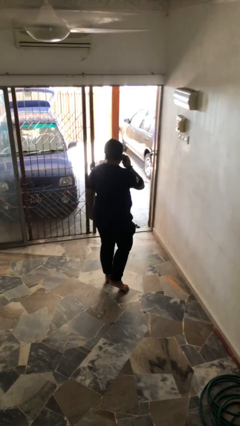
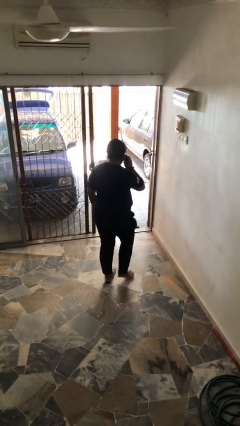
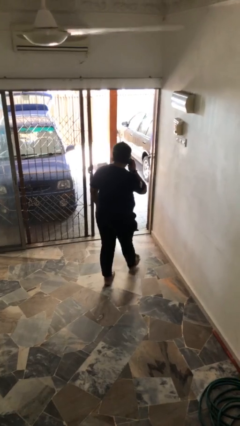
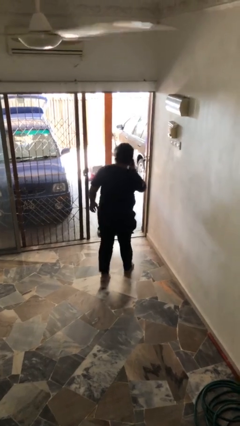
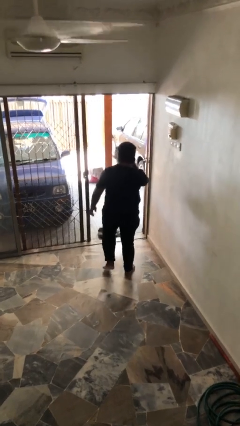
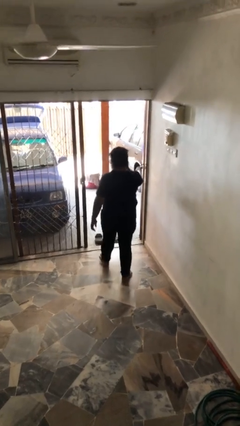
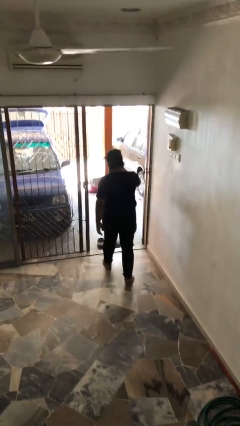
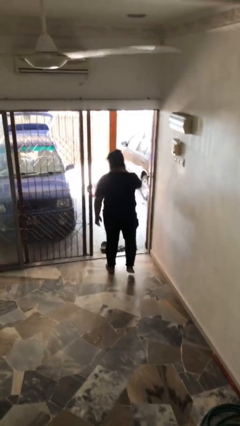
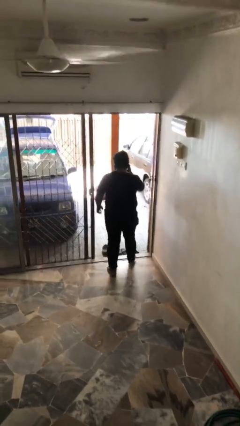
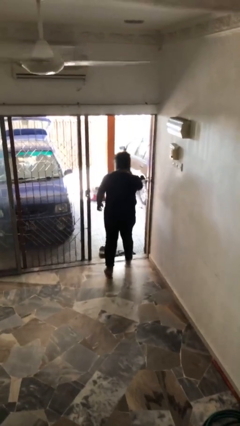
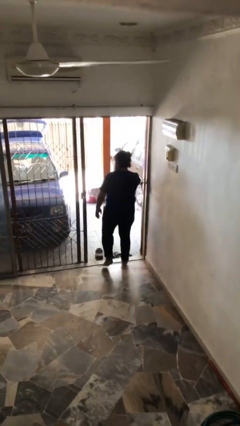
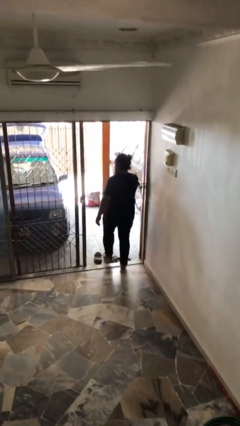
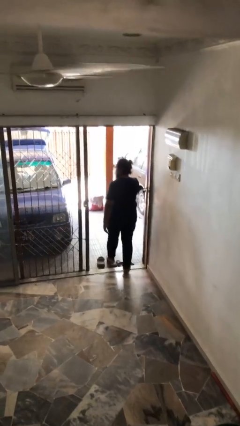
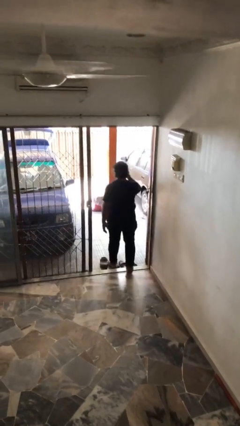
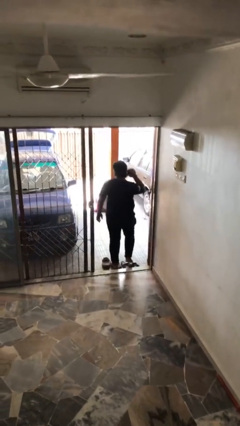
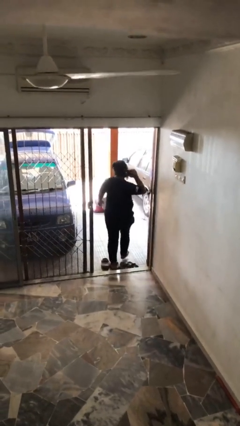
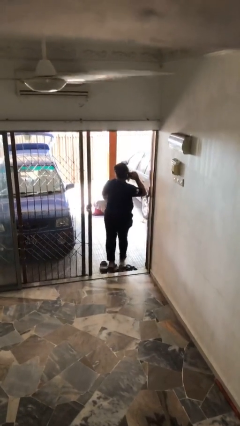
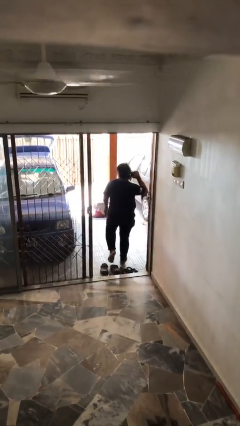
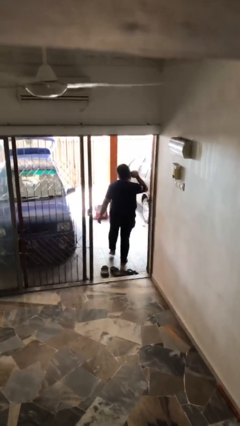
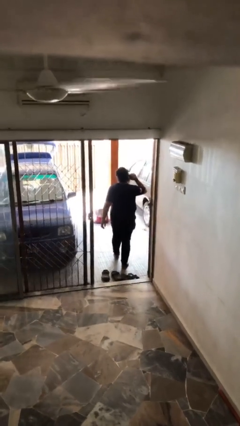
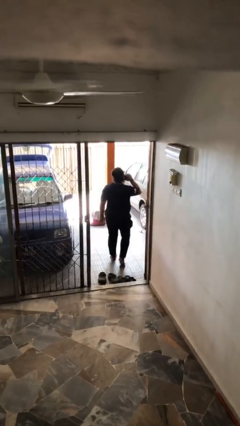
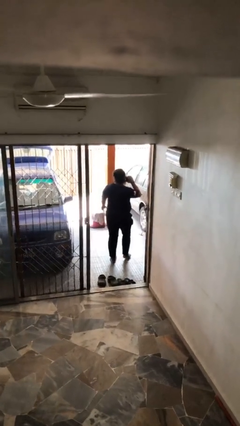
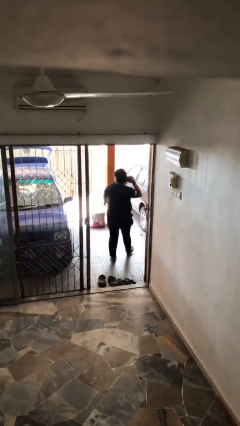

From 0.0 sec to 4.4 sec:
person texts on phone

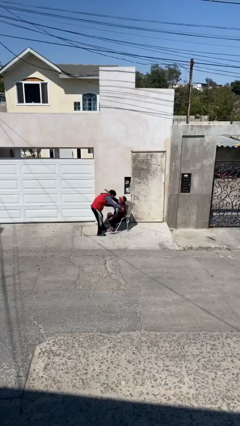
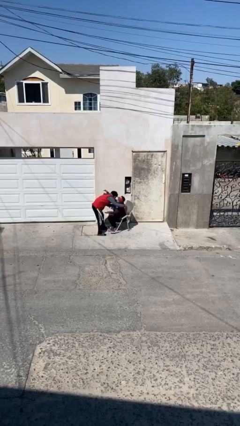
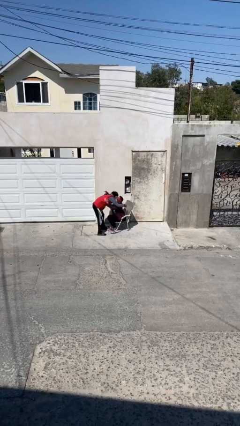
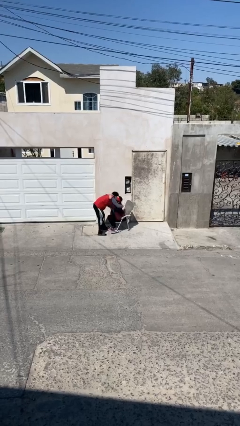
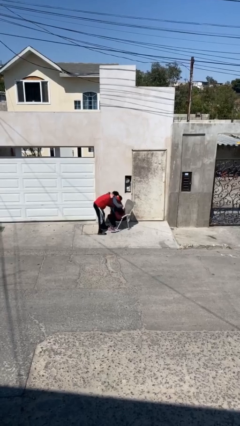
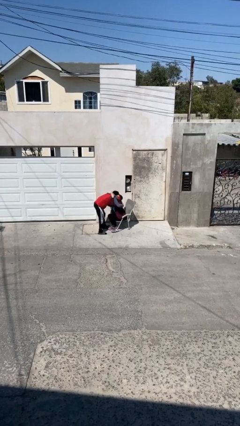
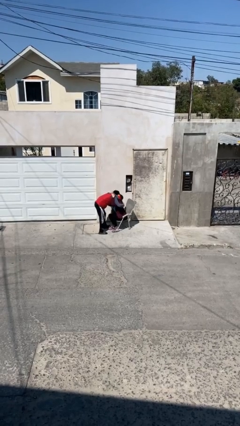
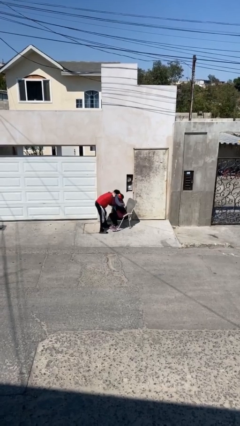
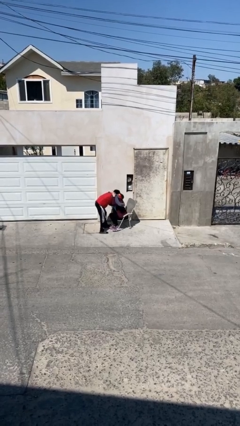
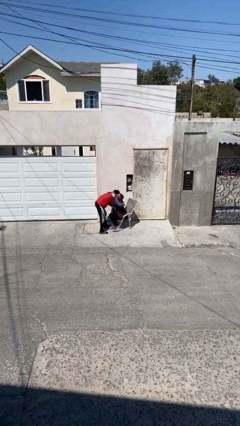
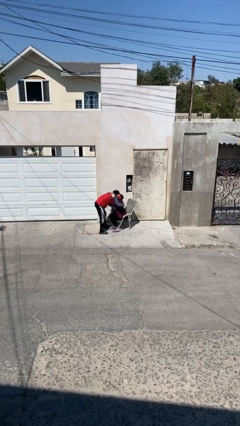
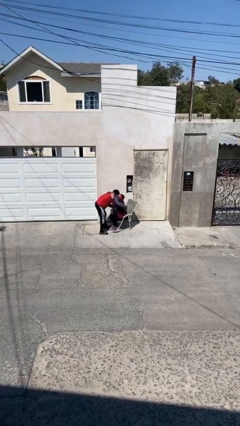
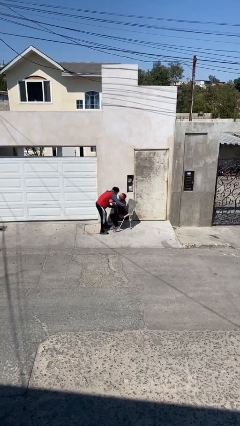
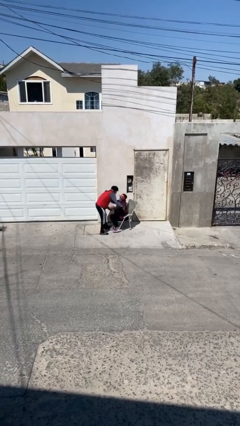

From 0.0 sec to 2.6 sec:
person embraces person

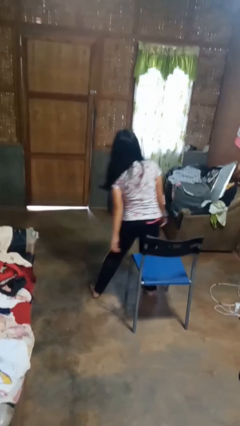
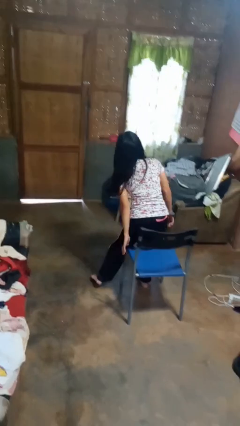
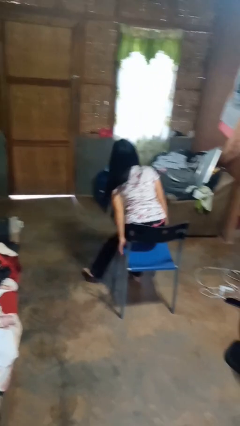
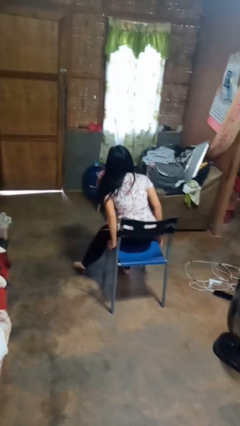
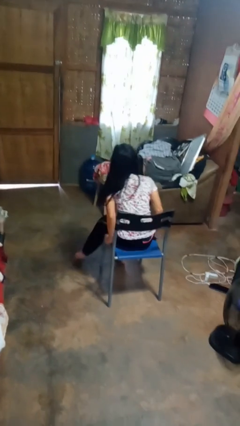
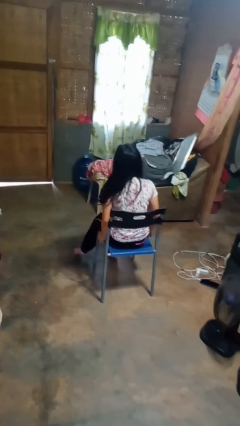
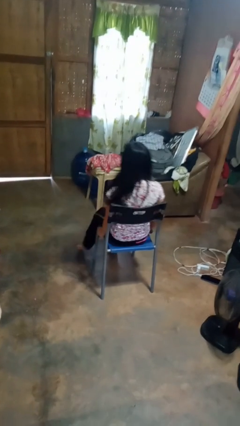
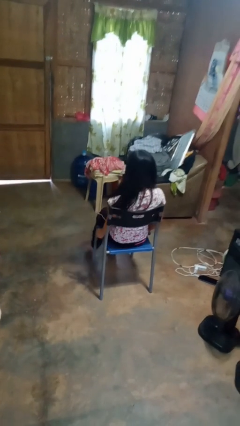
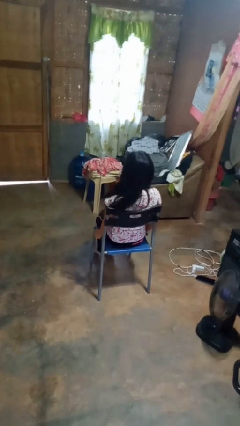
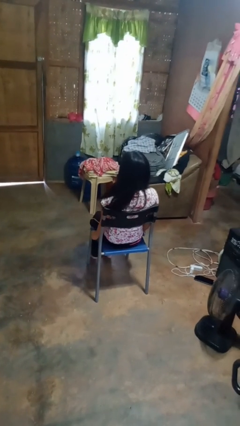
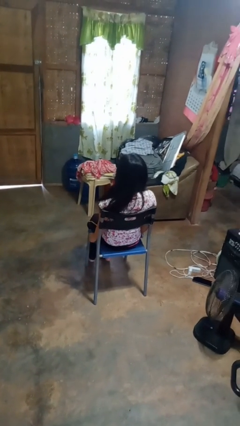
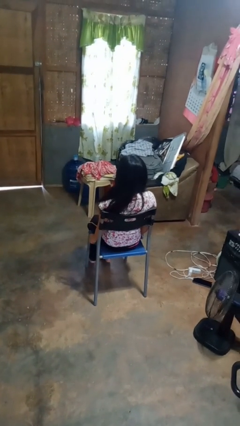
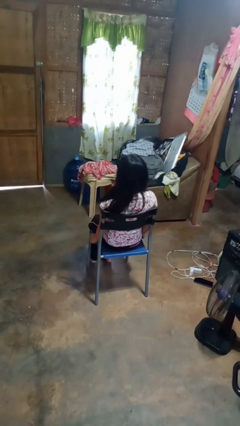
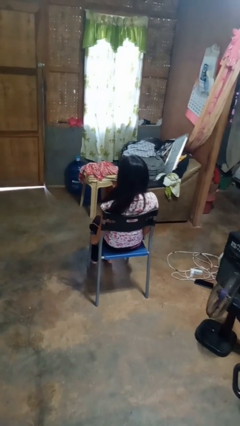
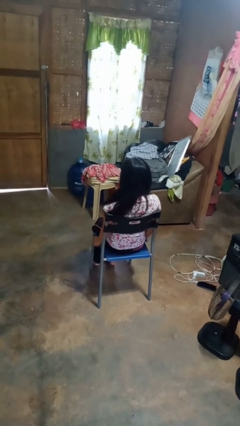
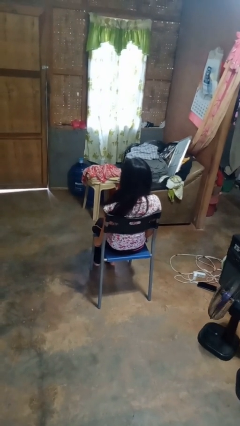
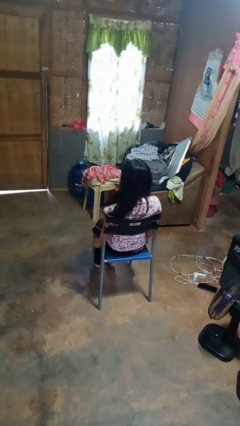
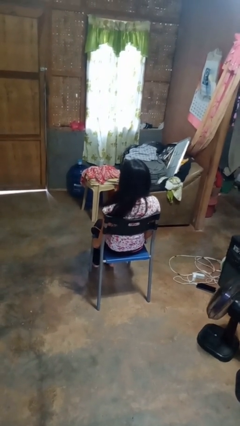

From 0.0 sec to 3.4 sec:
person sits down

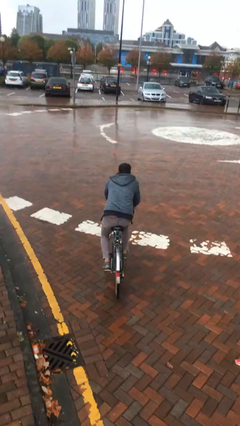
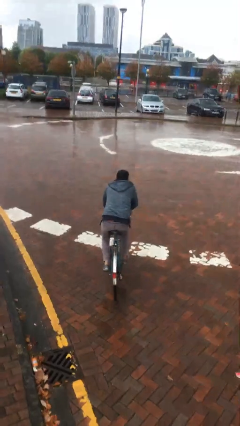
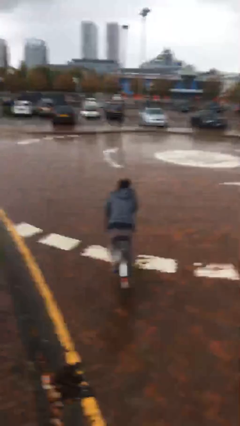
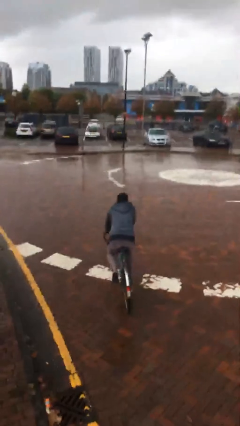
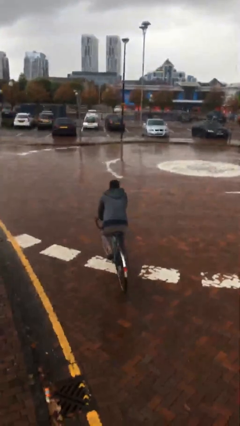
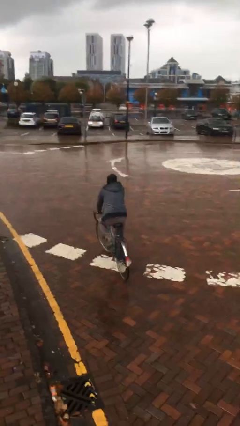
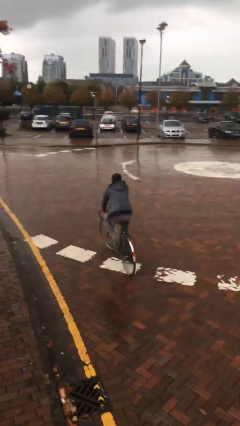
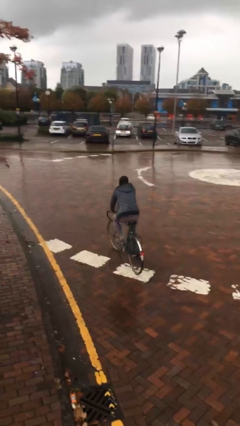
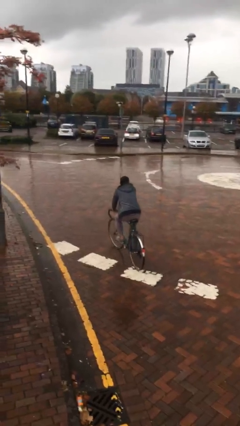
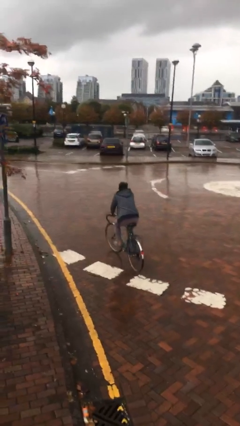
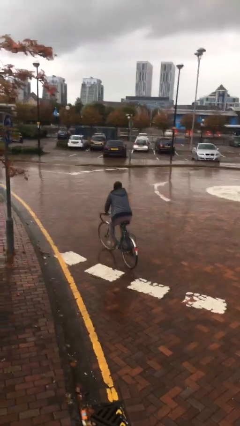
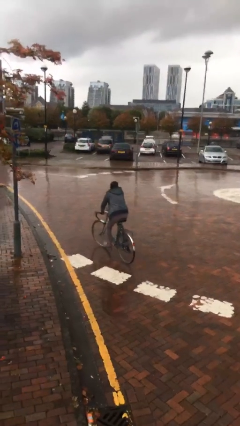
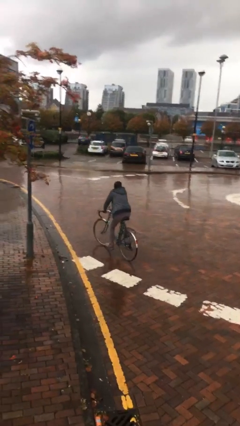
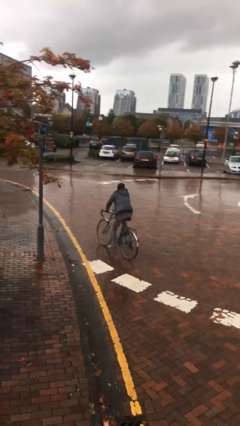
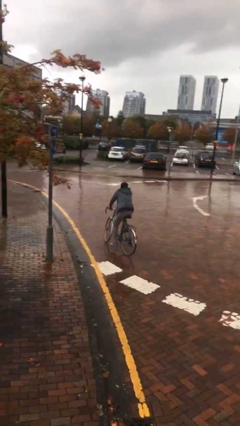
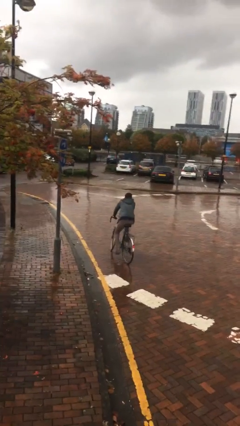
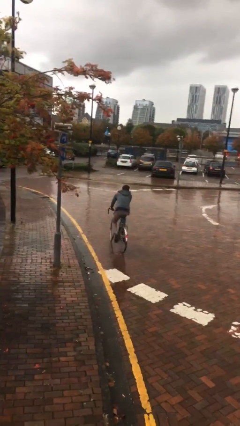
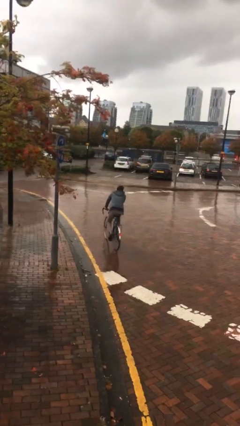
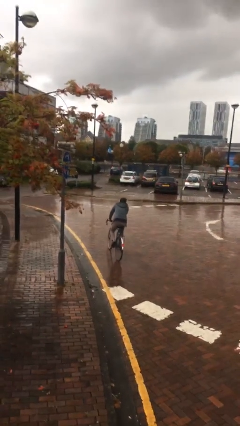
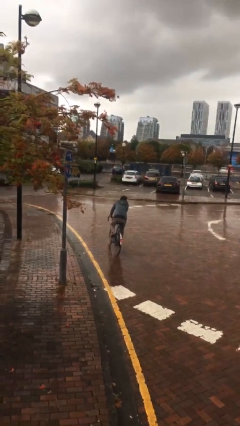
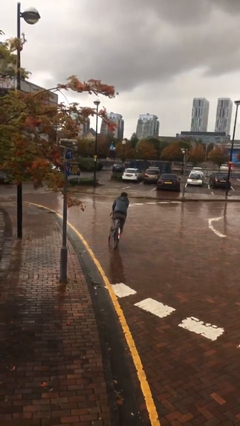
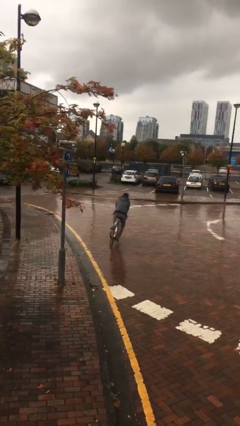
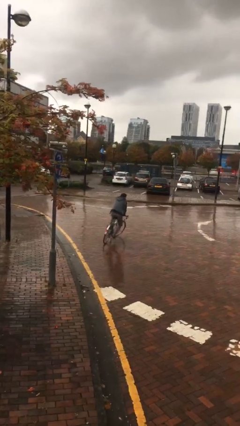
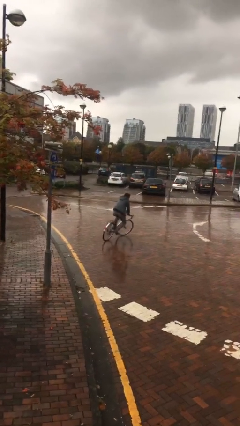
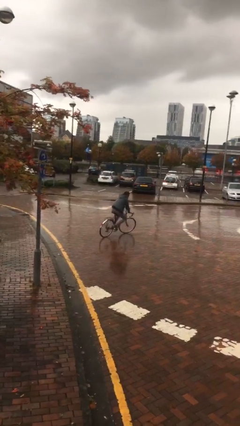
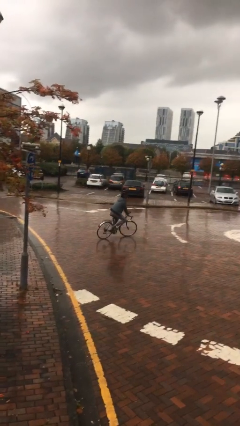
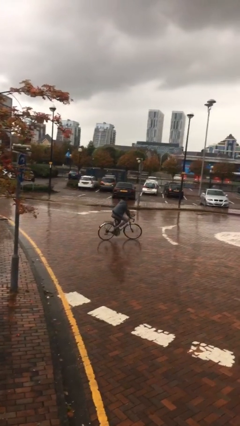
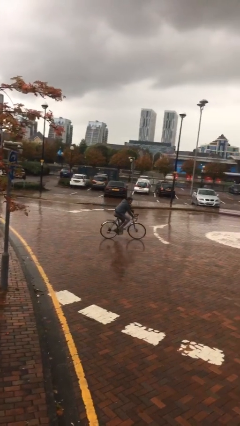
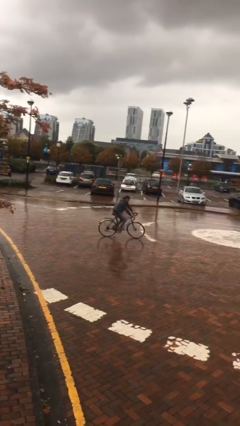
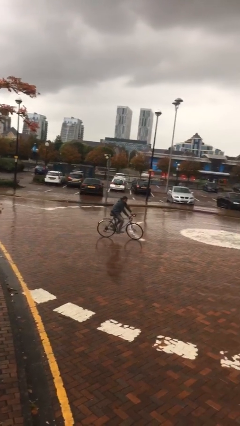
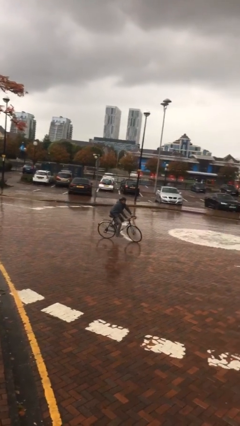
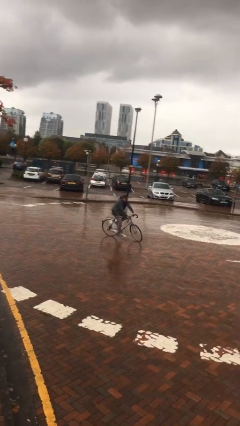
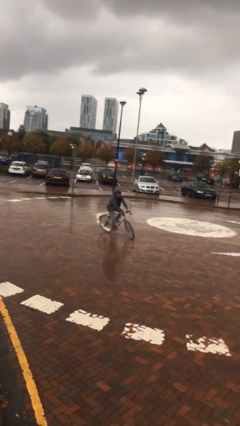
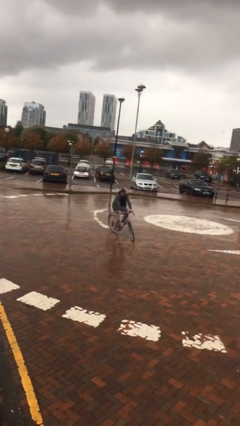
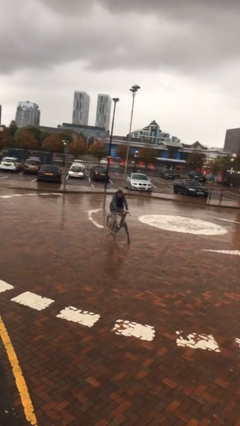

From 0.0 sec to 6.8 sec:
person rides bicycle

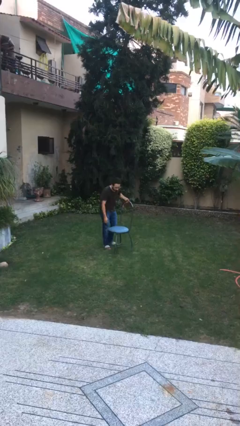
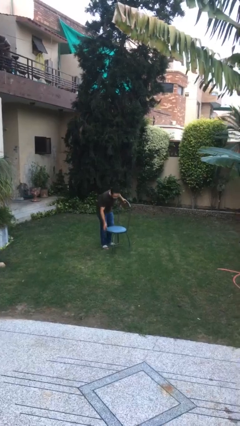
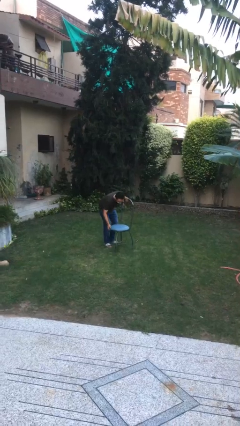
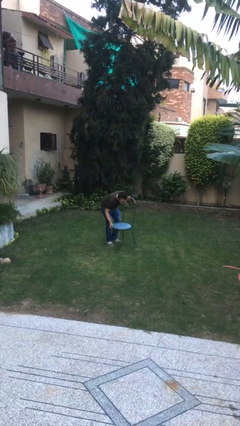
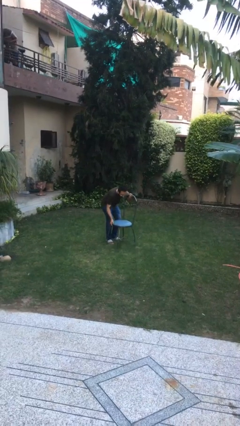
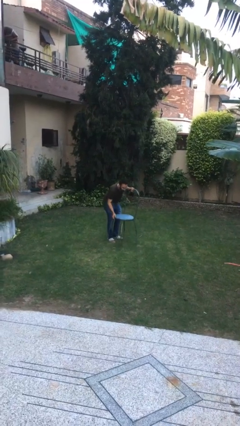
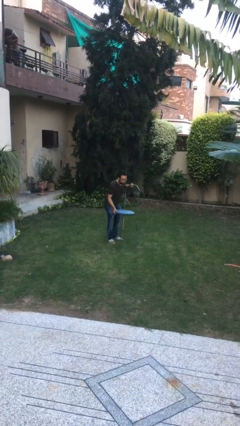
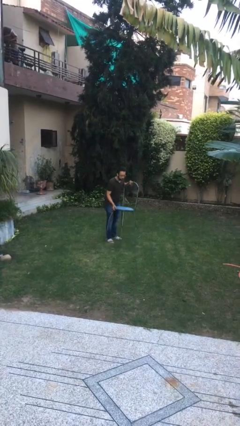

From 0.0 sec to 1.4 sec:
person picks up object from floor
